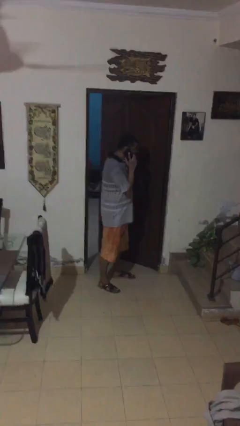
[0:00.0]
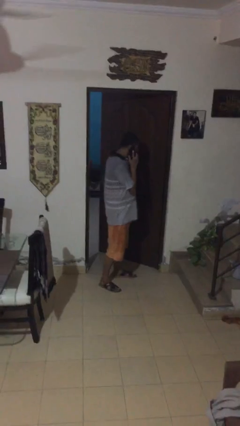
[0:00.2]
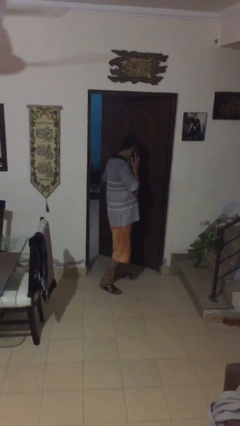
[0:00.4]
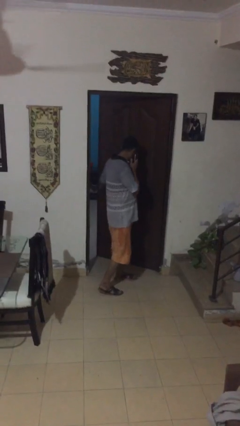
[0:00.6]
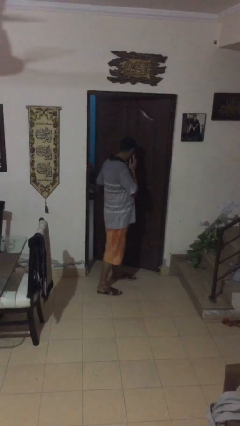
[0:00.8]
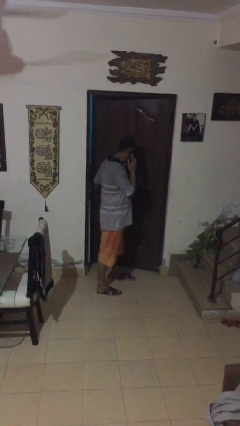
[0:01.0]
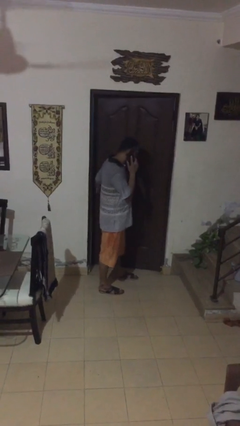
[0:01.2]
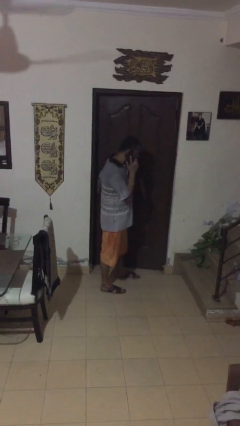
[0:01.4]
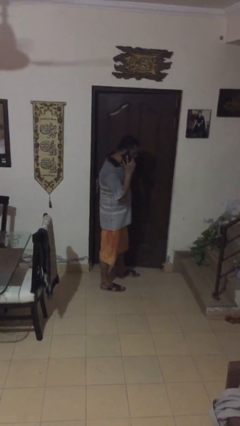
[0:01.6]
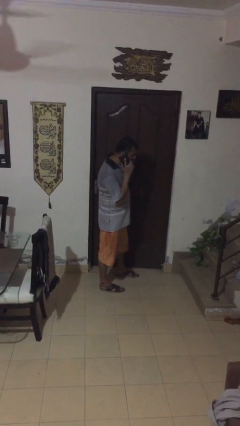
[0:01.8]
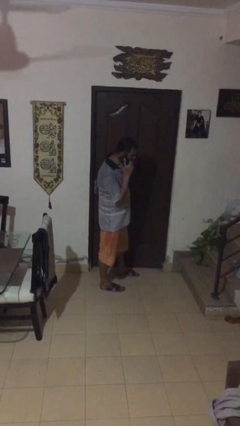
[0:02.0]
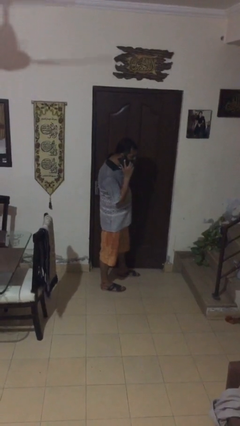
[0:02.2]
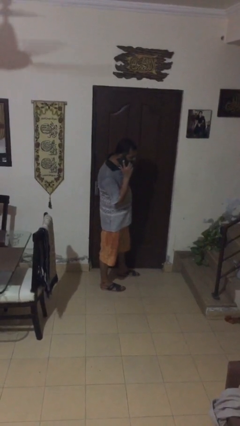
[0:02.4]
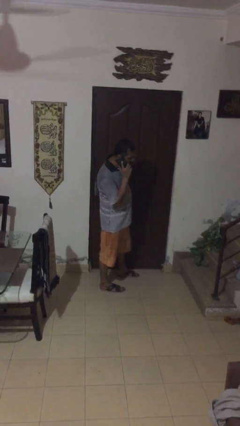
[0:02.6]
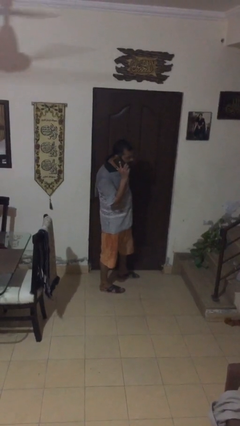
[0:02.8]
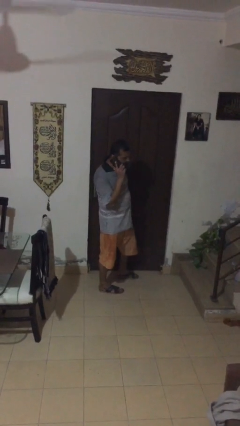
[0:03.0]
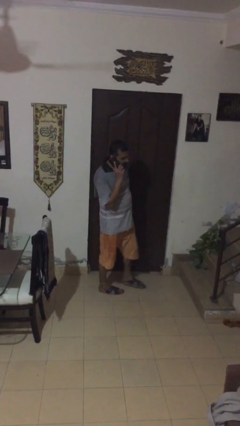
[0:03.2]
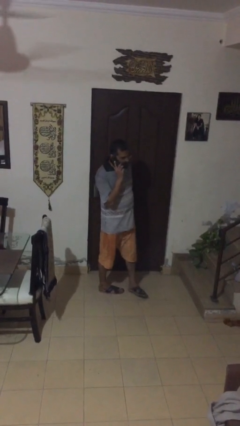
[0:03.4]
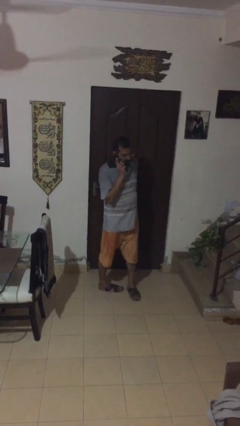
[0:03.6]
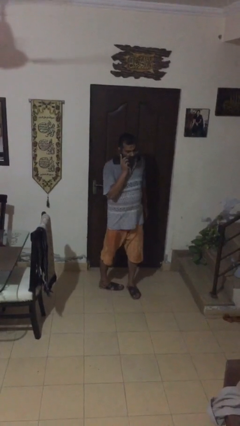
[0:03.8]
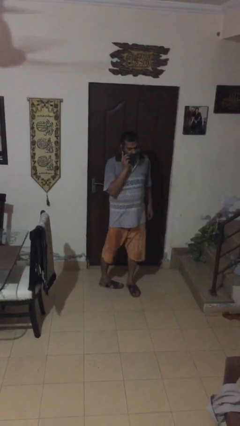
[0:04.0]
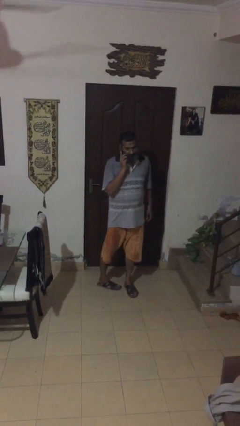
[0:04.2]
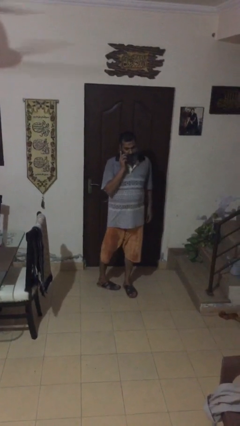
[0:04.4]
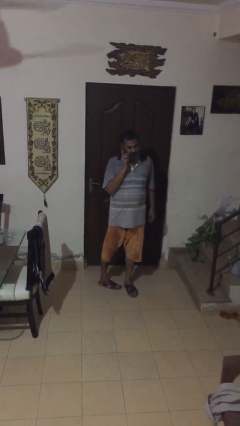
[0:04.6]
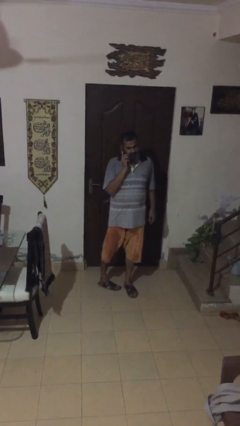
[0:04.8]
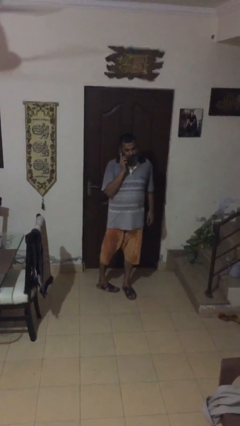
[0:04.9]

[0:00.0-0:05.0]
person closes facility door

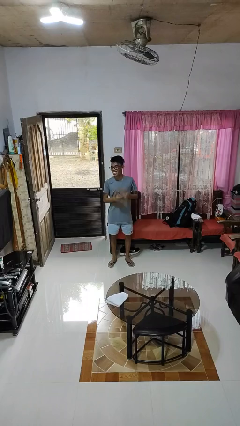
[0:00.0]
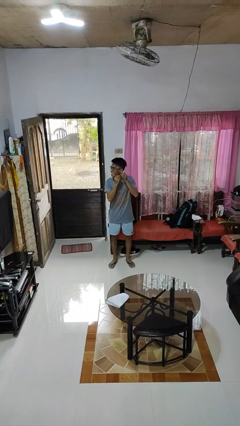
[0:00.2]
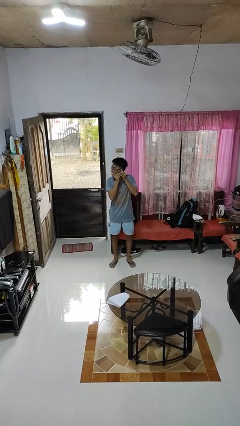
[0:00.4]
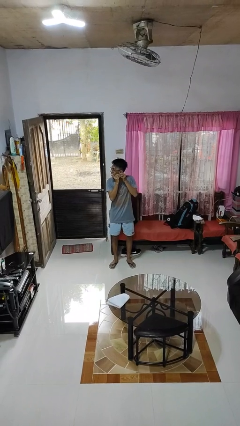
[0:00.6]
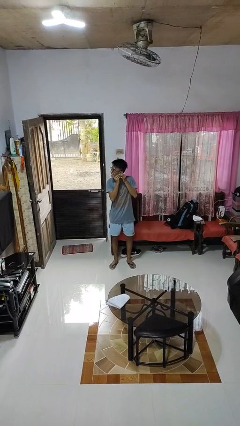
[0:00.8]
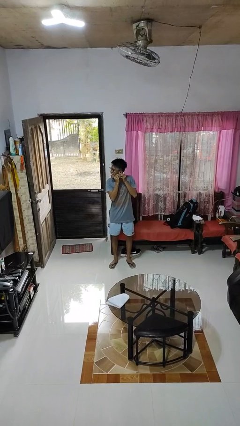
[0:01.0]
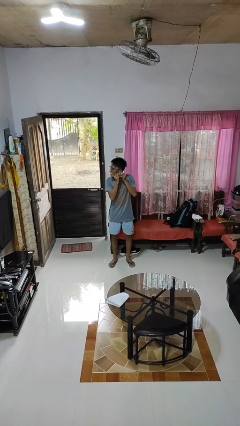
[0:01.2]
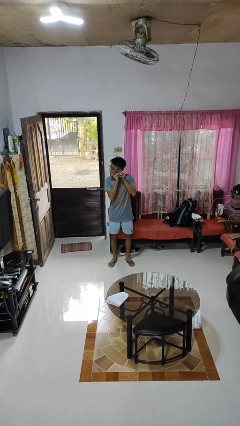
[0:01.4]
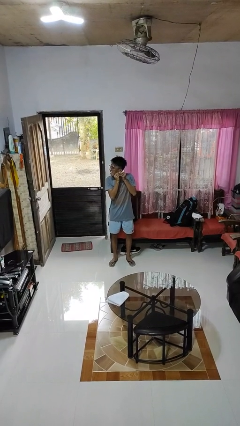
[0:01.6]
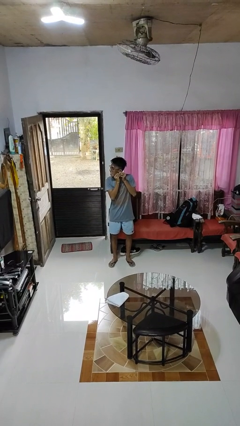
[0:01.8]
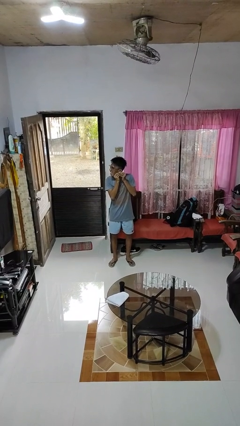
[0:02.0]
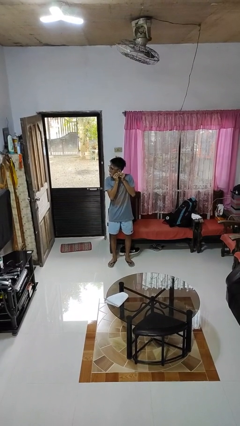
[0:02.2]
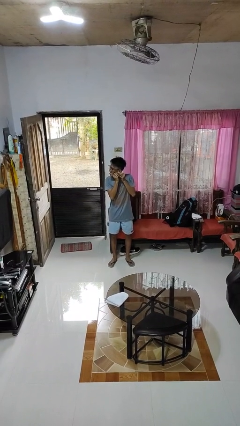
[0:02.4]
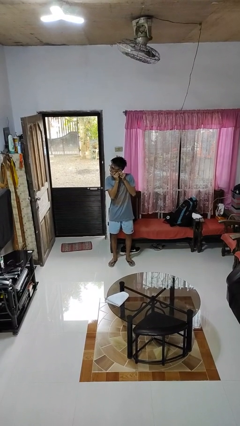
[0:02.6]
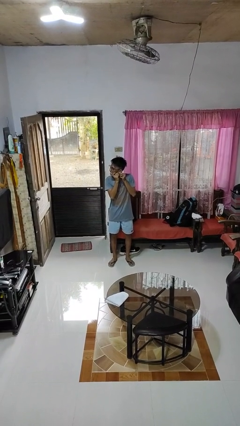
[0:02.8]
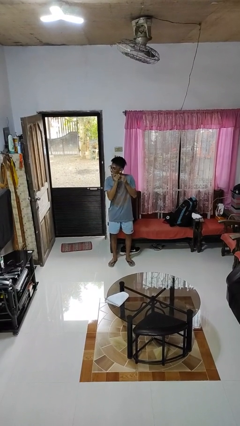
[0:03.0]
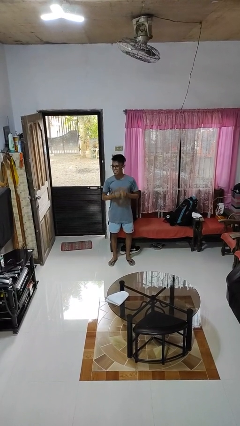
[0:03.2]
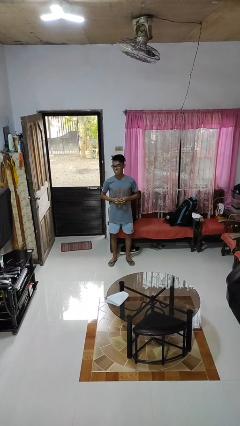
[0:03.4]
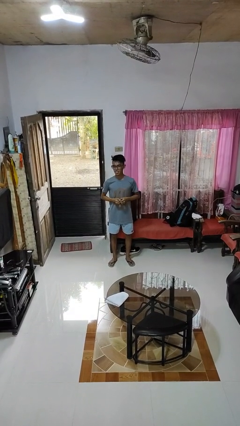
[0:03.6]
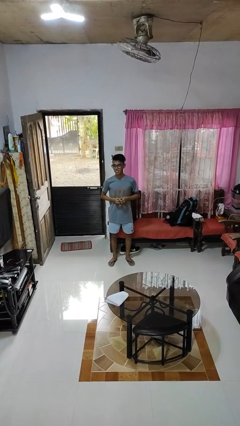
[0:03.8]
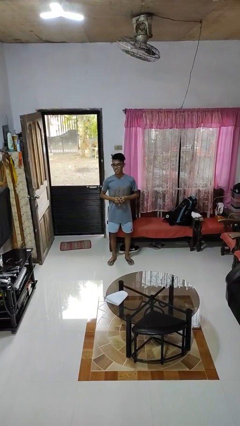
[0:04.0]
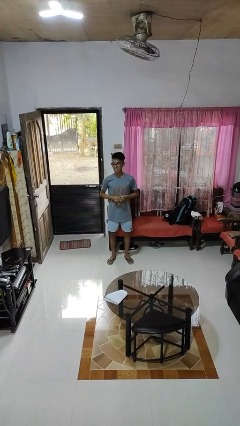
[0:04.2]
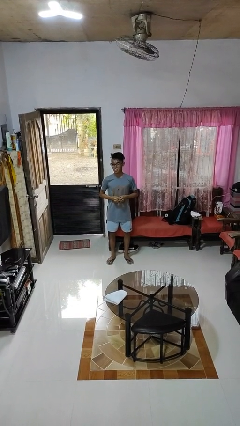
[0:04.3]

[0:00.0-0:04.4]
person puts on earrings

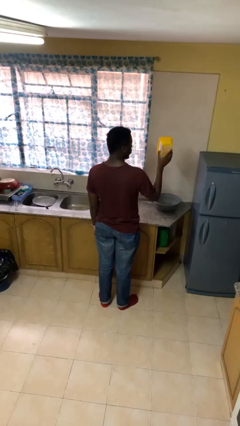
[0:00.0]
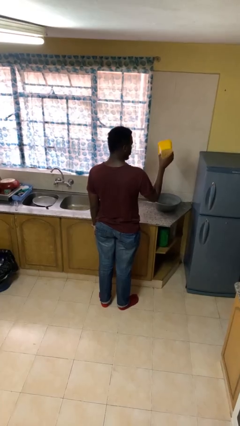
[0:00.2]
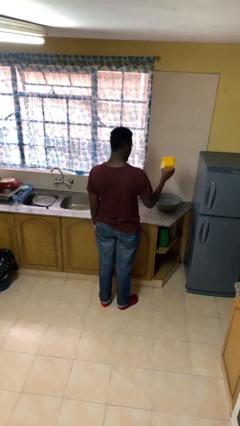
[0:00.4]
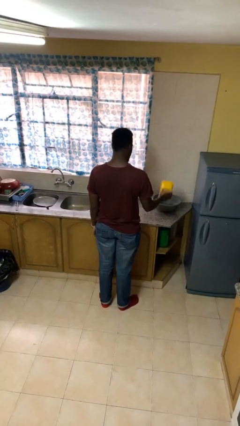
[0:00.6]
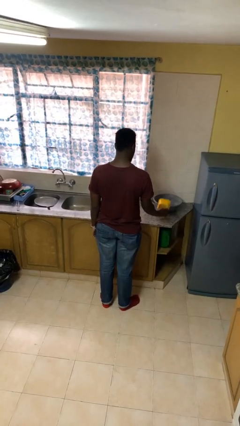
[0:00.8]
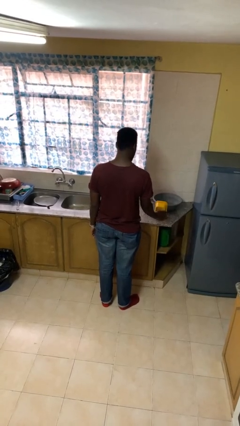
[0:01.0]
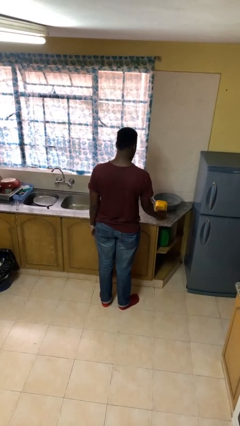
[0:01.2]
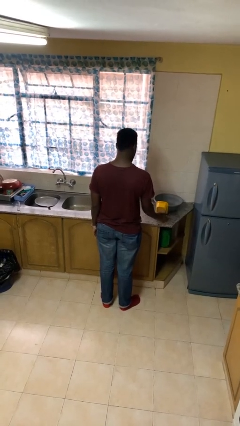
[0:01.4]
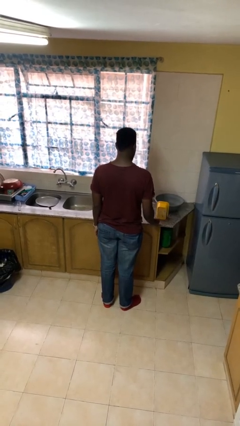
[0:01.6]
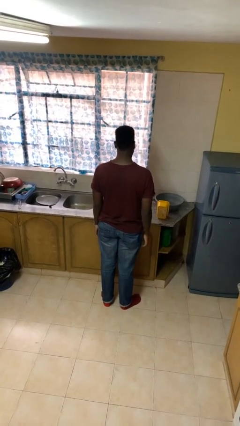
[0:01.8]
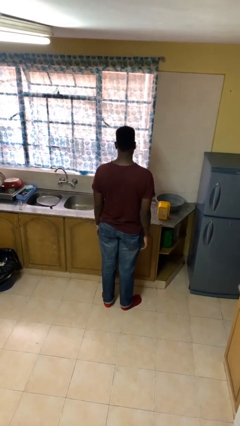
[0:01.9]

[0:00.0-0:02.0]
person puts down object on countertop

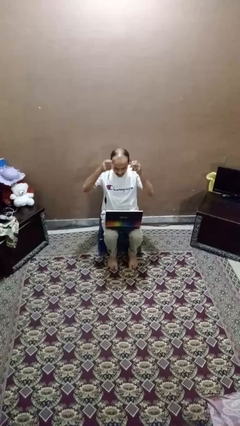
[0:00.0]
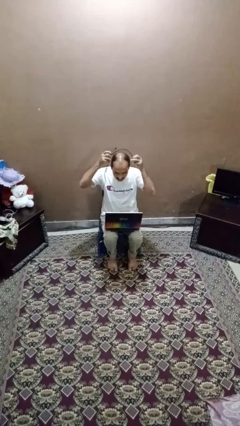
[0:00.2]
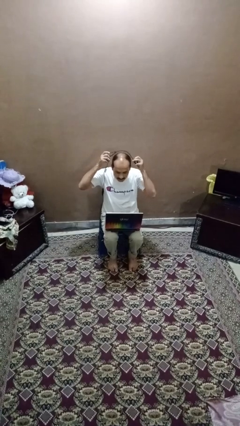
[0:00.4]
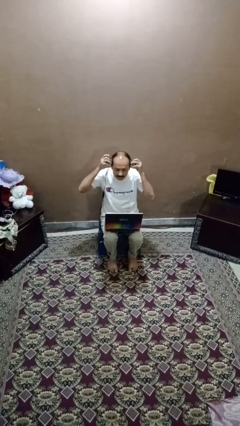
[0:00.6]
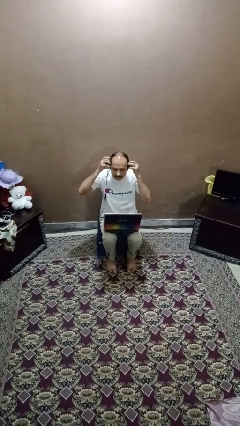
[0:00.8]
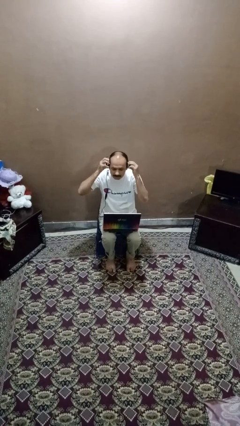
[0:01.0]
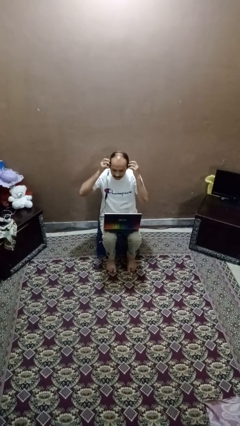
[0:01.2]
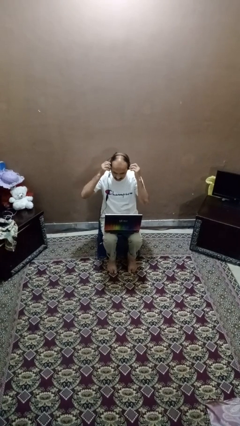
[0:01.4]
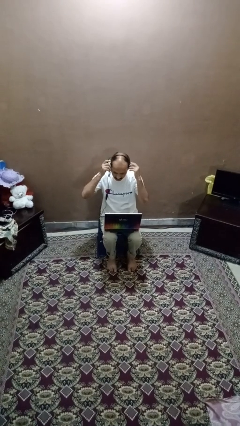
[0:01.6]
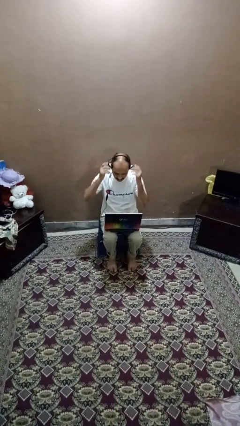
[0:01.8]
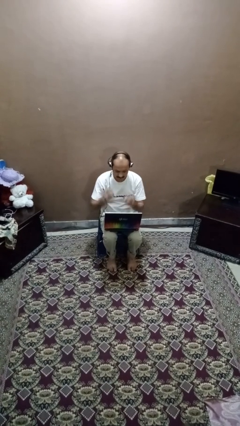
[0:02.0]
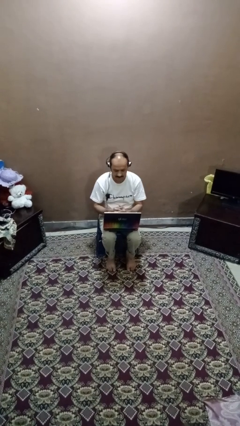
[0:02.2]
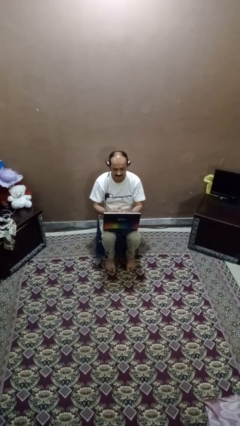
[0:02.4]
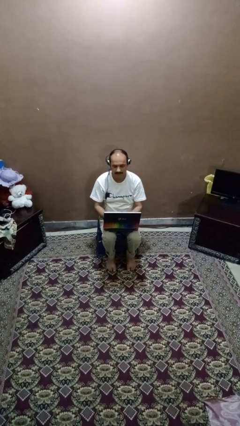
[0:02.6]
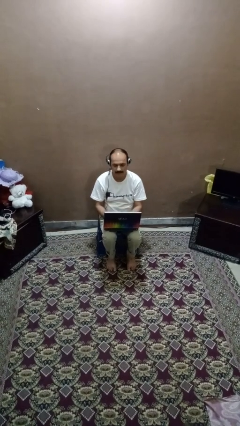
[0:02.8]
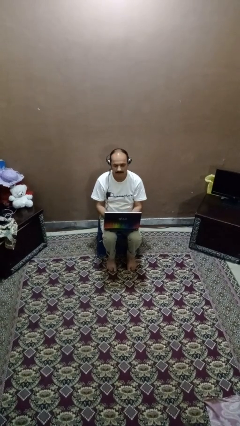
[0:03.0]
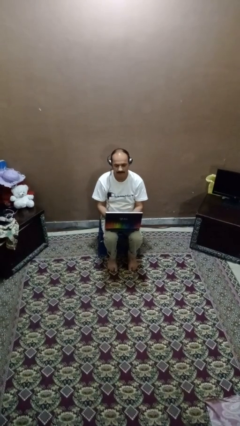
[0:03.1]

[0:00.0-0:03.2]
person puts on headphones

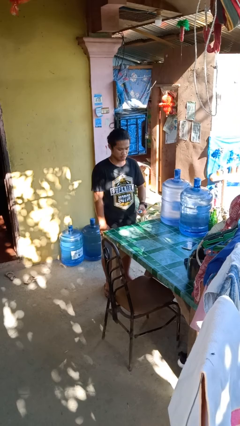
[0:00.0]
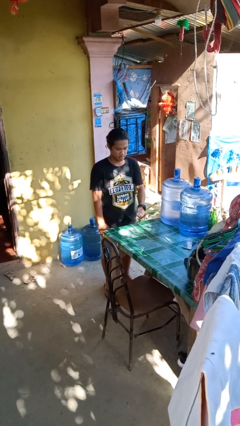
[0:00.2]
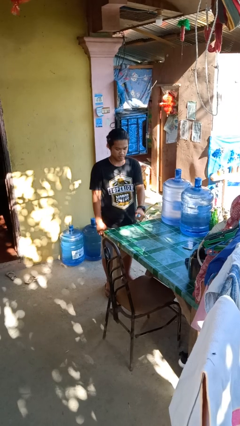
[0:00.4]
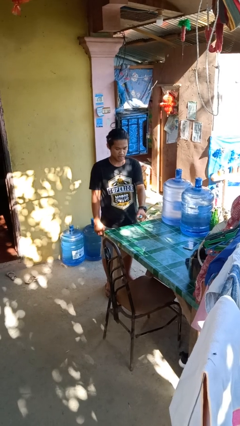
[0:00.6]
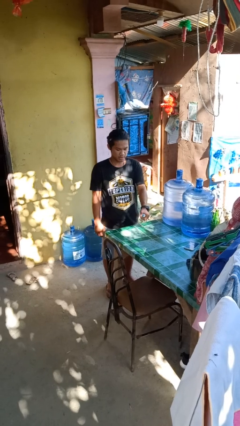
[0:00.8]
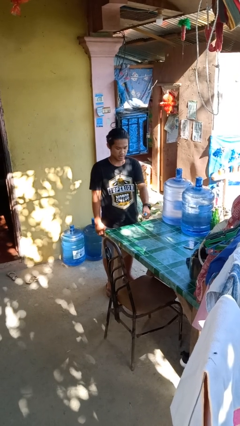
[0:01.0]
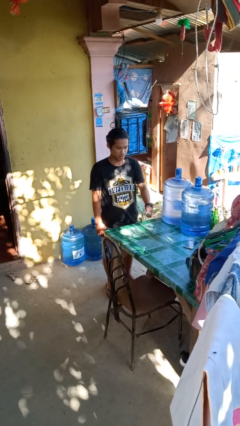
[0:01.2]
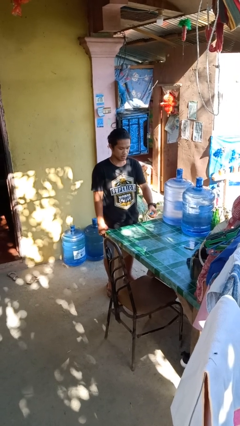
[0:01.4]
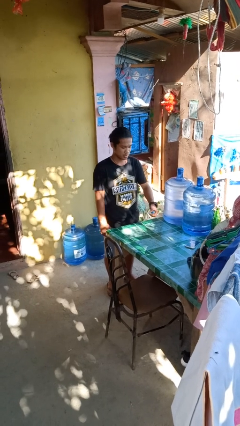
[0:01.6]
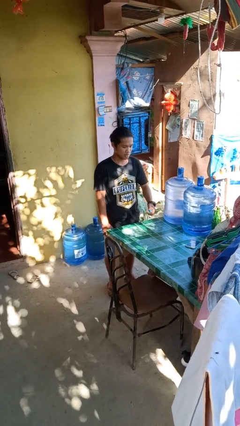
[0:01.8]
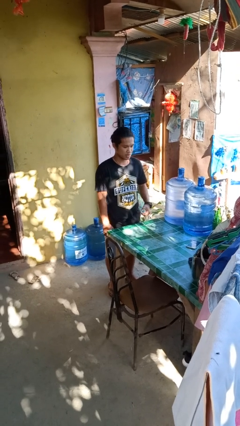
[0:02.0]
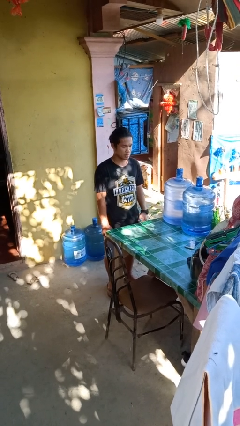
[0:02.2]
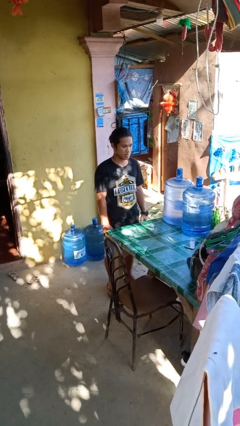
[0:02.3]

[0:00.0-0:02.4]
person sprays from bottle

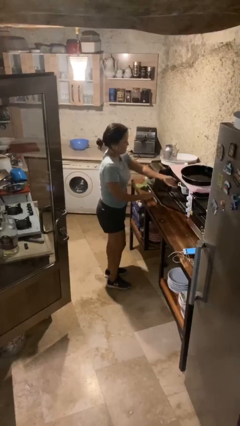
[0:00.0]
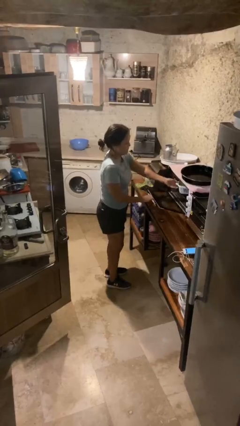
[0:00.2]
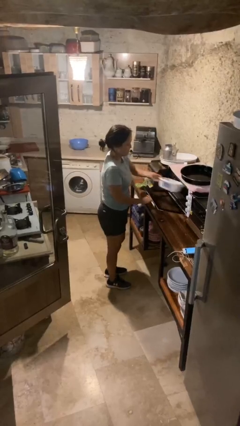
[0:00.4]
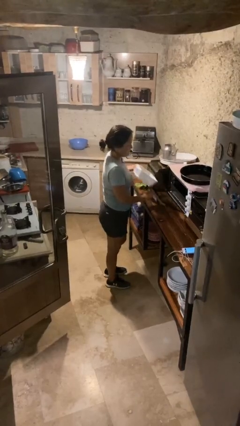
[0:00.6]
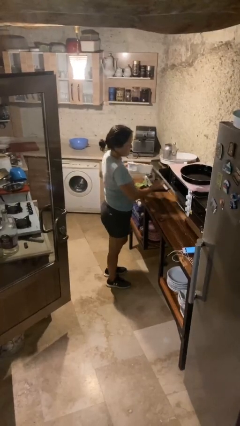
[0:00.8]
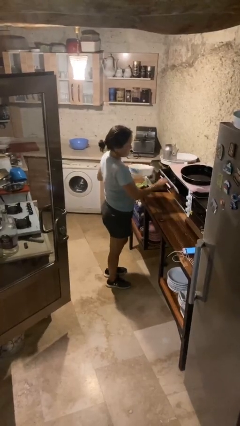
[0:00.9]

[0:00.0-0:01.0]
person takes object from microwave
